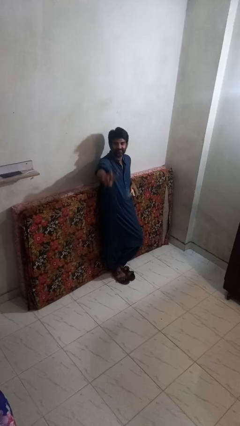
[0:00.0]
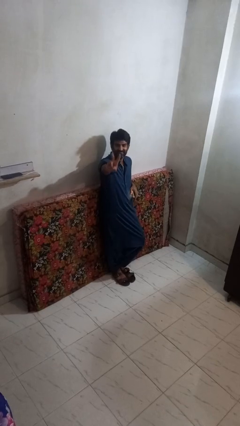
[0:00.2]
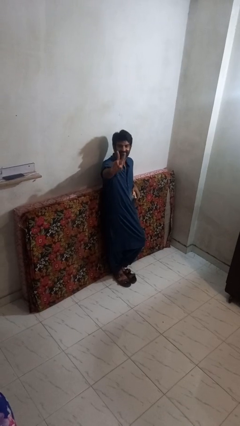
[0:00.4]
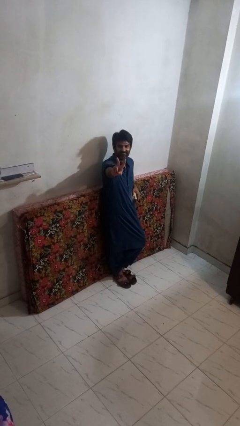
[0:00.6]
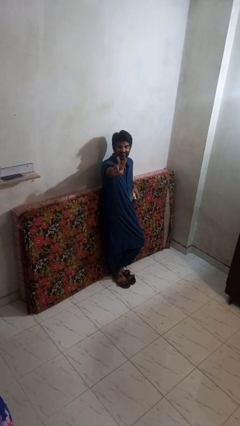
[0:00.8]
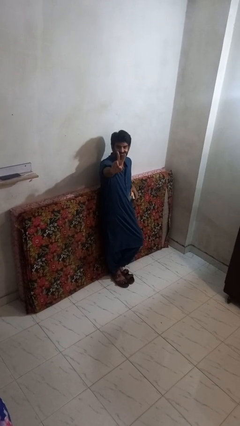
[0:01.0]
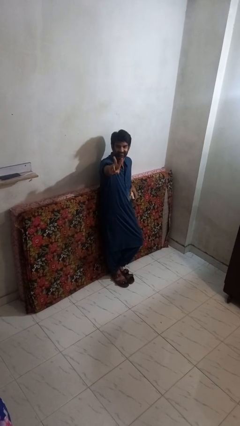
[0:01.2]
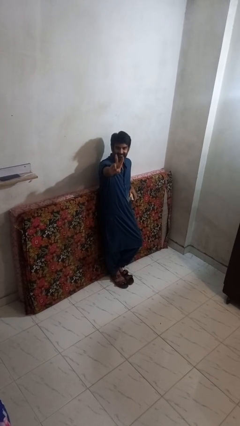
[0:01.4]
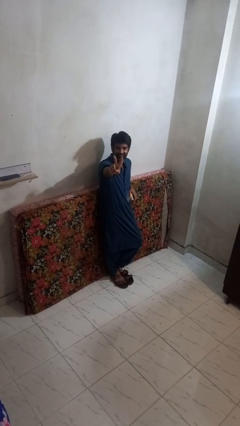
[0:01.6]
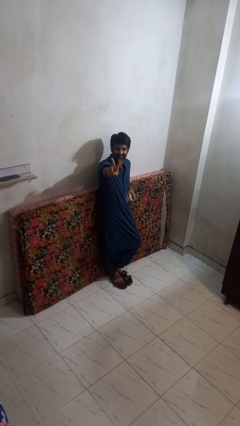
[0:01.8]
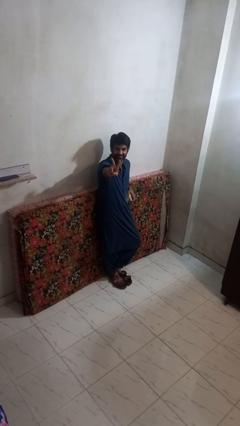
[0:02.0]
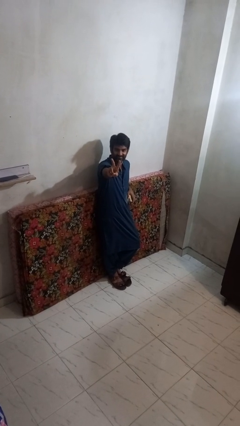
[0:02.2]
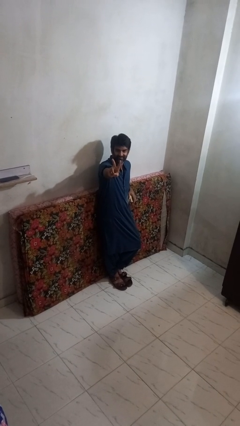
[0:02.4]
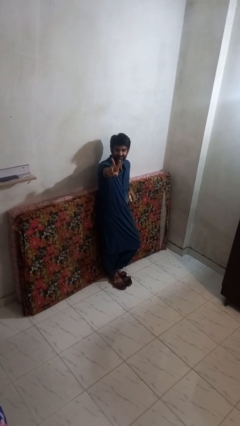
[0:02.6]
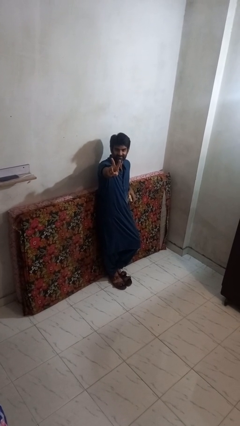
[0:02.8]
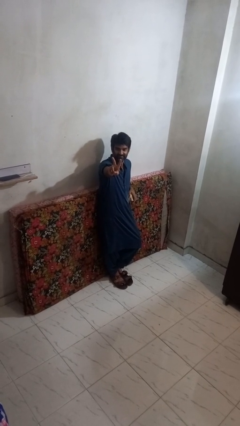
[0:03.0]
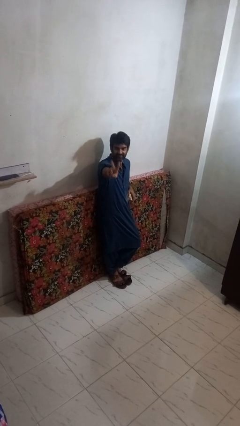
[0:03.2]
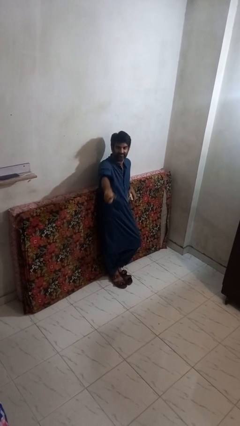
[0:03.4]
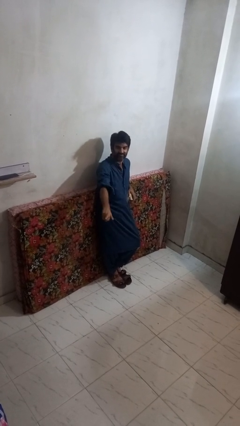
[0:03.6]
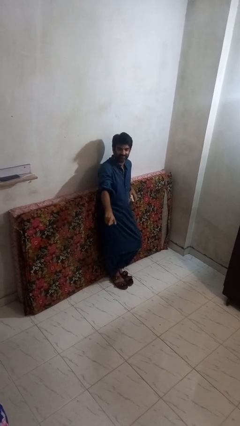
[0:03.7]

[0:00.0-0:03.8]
person gestures peace

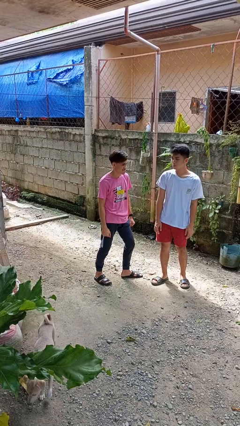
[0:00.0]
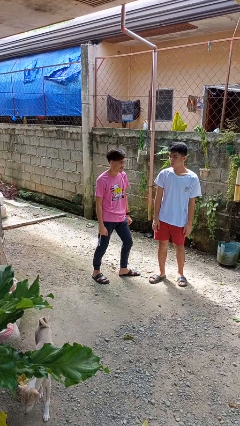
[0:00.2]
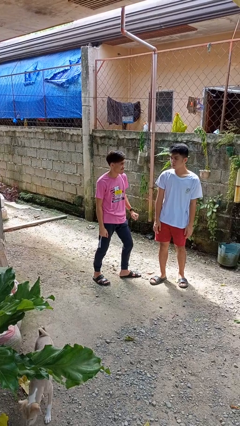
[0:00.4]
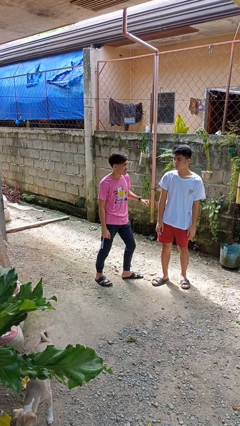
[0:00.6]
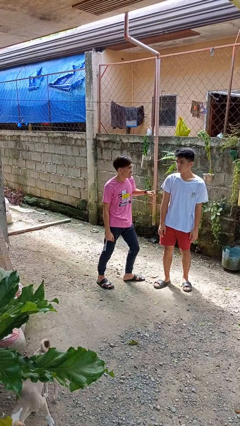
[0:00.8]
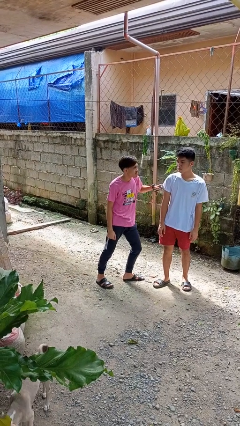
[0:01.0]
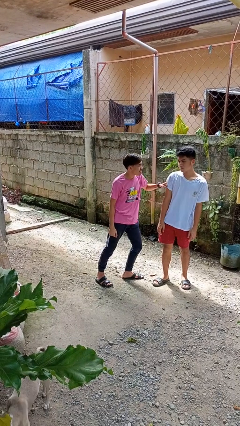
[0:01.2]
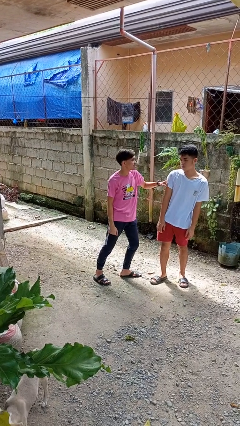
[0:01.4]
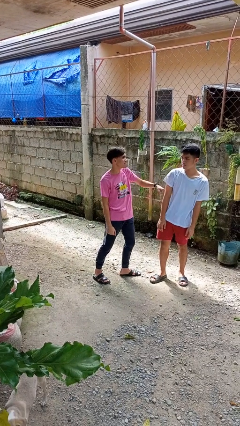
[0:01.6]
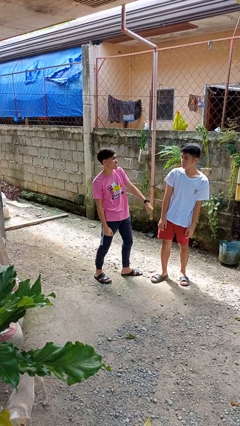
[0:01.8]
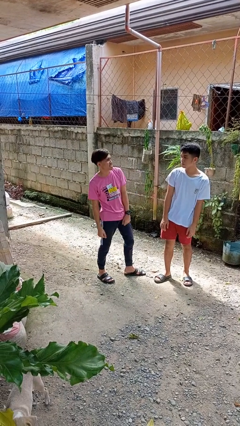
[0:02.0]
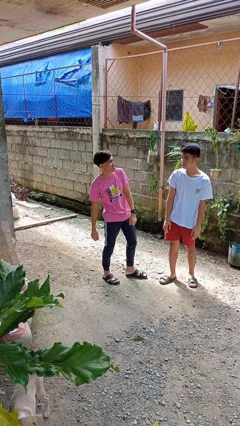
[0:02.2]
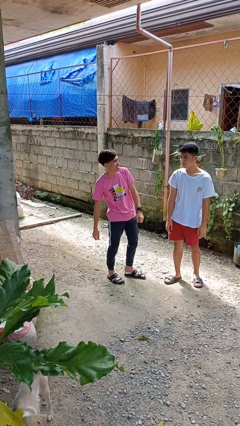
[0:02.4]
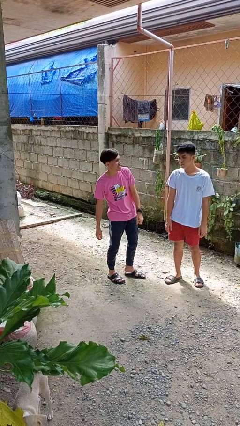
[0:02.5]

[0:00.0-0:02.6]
person pounds shoulders of person

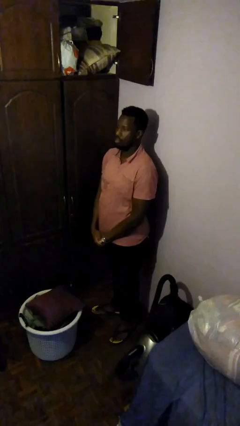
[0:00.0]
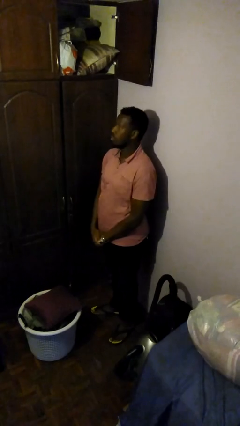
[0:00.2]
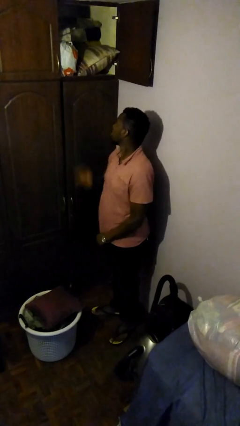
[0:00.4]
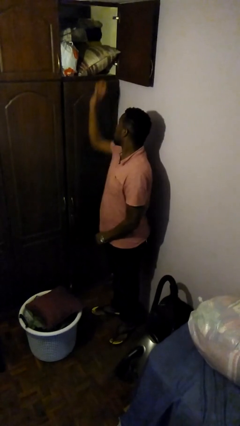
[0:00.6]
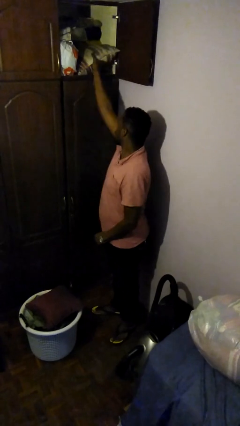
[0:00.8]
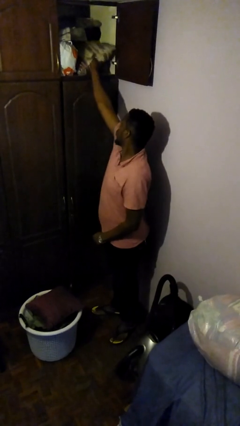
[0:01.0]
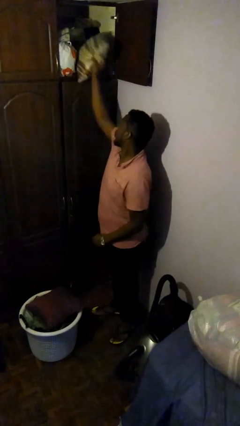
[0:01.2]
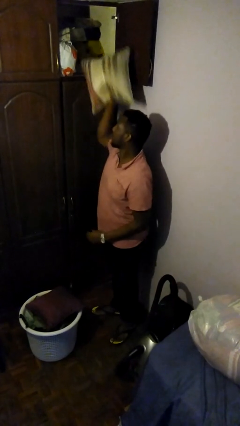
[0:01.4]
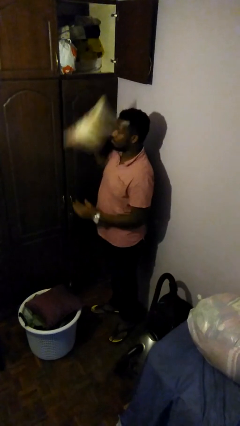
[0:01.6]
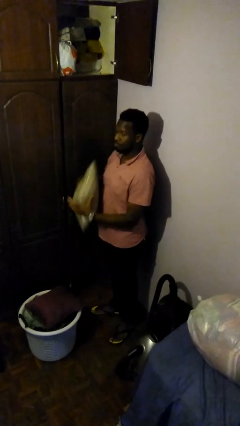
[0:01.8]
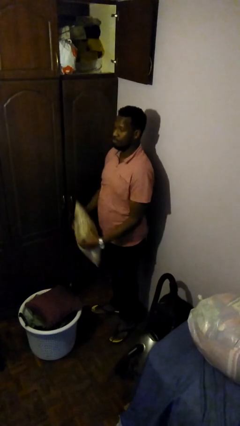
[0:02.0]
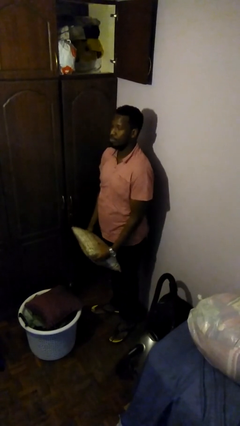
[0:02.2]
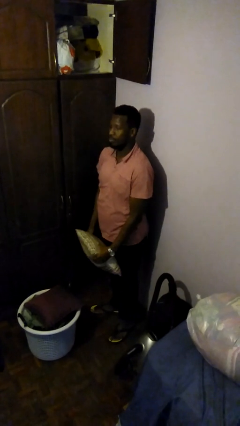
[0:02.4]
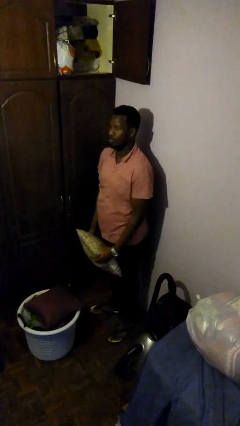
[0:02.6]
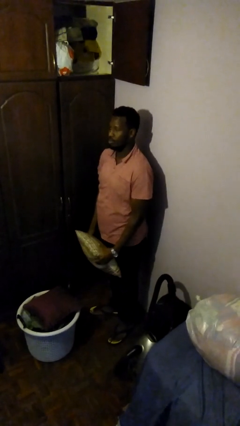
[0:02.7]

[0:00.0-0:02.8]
person picks up object from shelf

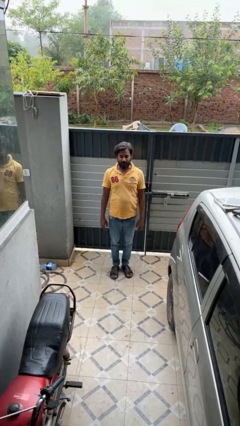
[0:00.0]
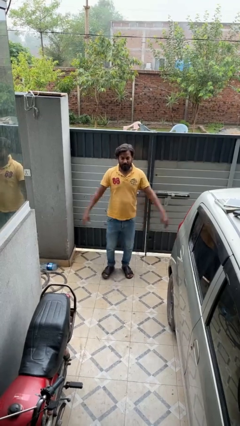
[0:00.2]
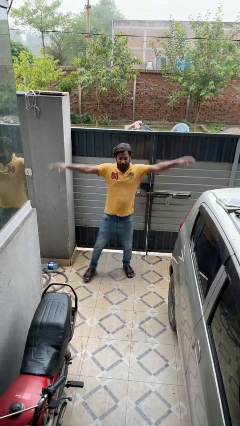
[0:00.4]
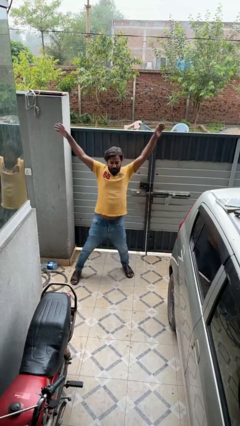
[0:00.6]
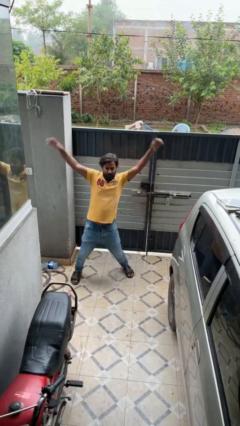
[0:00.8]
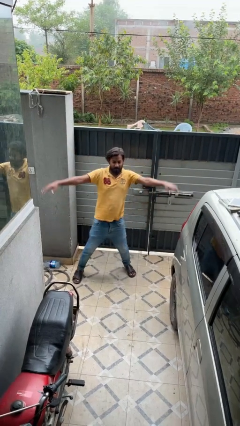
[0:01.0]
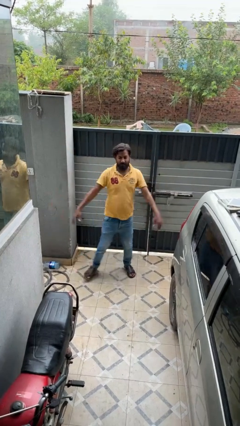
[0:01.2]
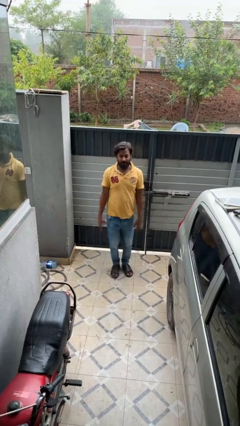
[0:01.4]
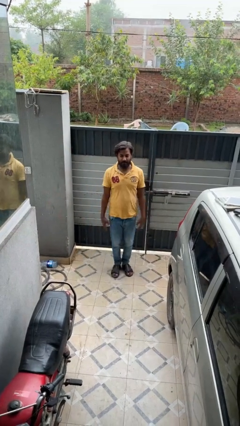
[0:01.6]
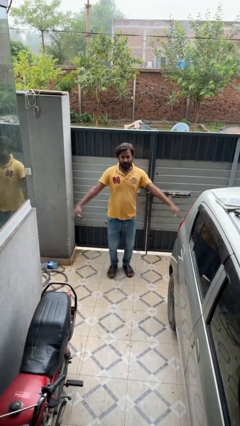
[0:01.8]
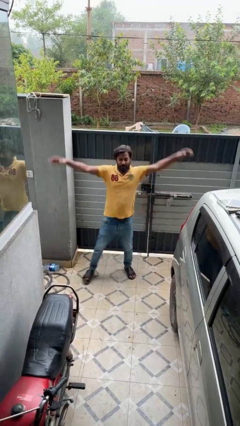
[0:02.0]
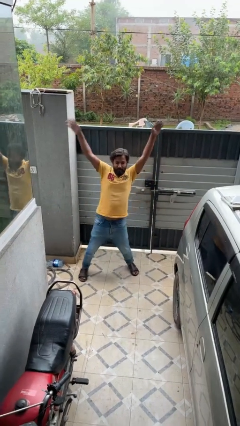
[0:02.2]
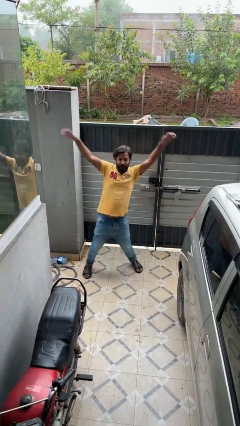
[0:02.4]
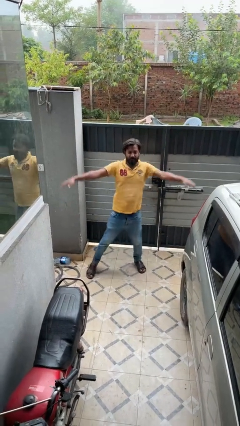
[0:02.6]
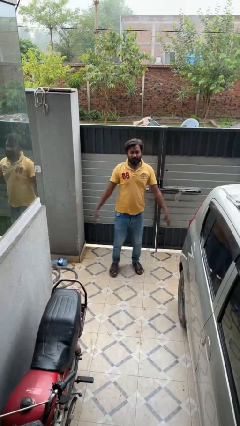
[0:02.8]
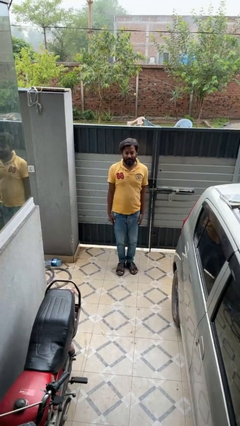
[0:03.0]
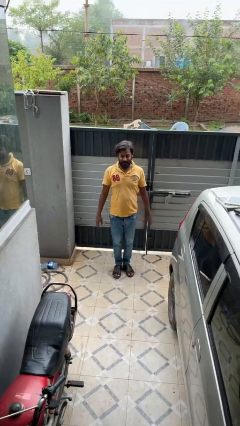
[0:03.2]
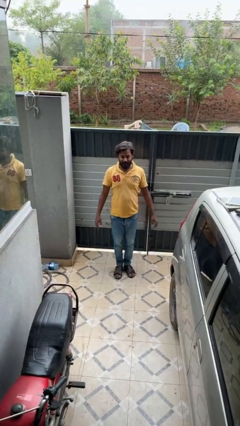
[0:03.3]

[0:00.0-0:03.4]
person exercises with jumping jacks

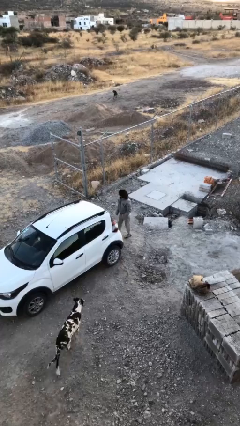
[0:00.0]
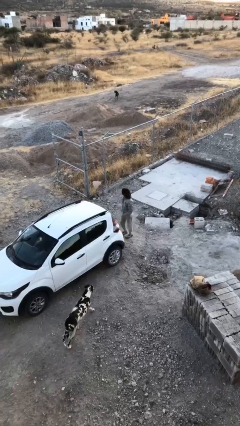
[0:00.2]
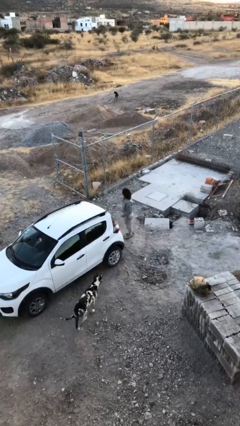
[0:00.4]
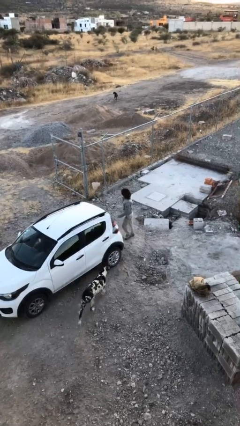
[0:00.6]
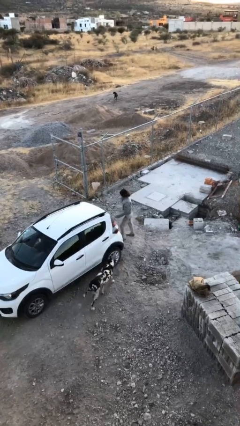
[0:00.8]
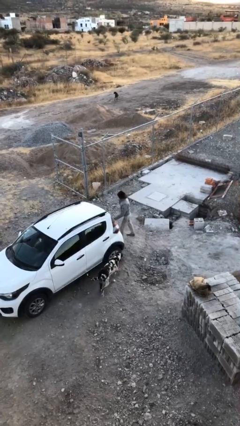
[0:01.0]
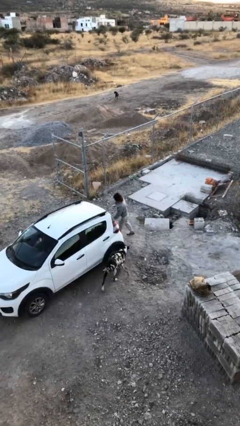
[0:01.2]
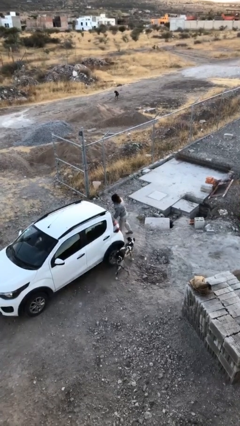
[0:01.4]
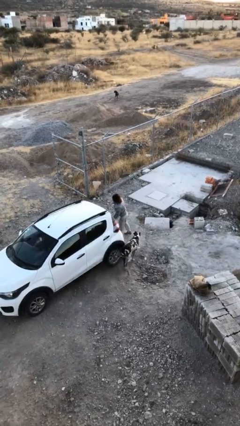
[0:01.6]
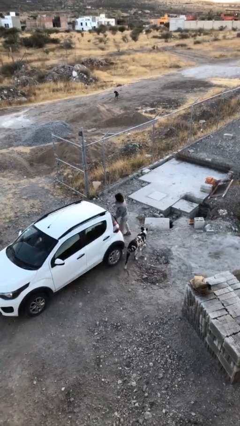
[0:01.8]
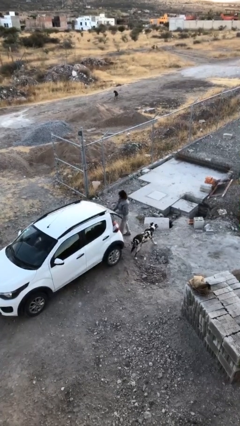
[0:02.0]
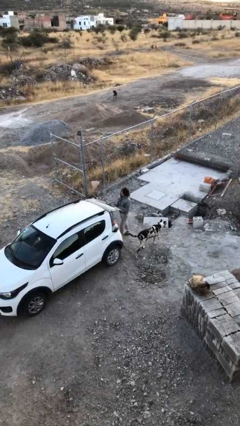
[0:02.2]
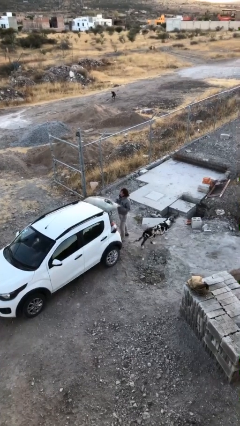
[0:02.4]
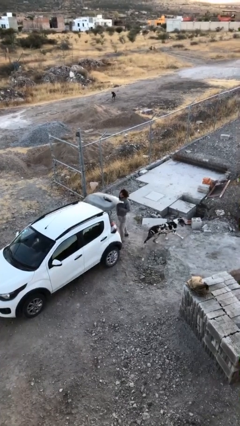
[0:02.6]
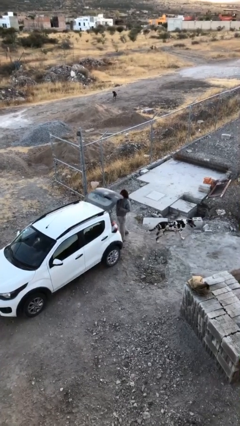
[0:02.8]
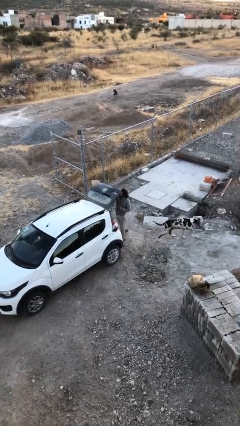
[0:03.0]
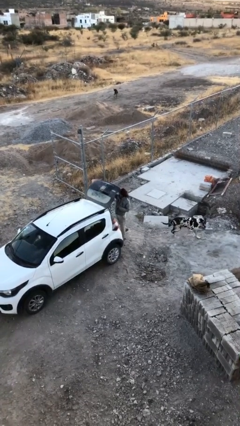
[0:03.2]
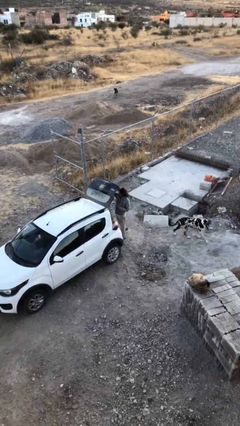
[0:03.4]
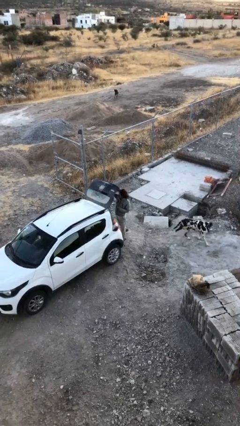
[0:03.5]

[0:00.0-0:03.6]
person opens car trunk

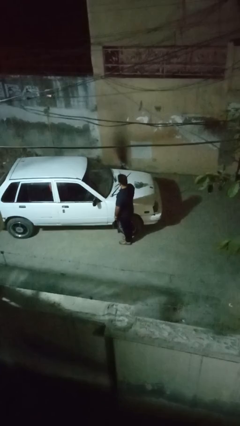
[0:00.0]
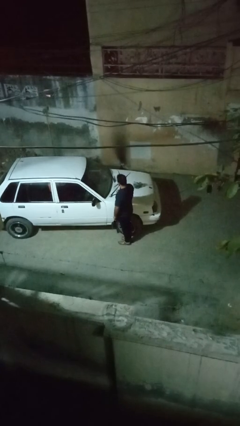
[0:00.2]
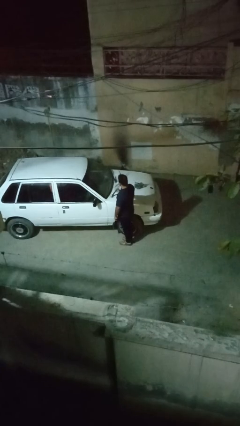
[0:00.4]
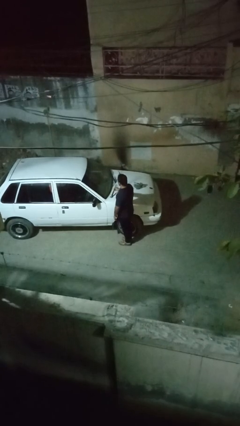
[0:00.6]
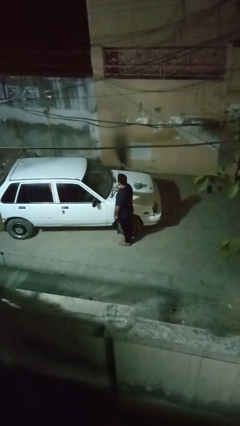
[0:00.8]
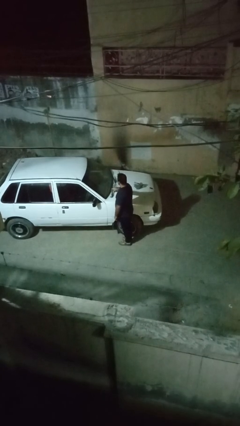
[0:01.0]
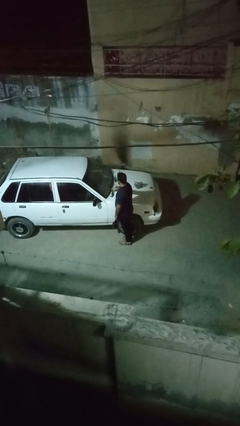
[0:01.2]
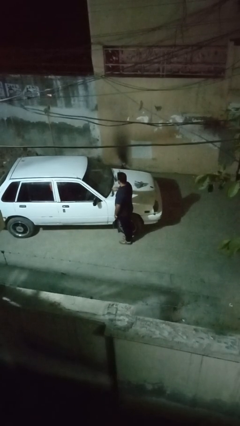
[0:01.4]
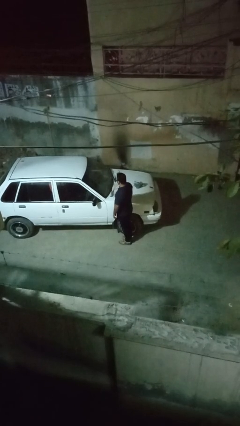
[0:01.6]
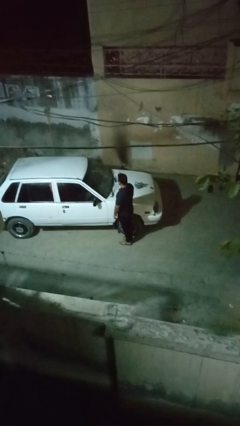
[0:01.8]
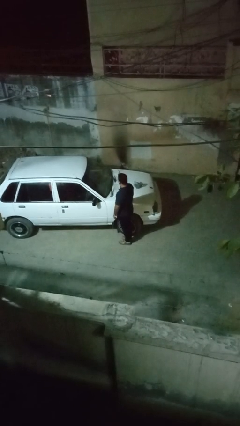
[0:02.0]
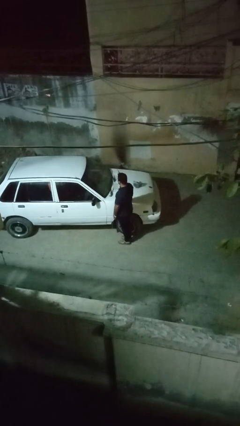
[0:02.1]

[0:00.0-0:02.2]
person flips down car wipers
